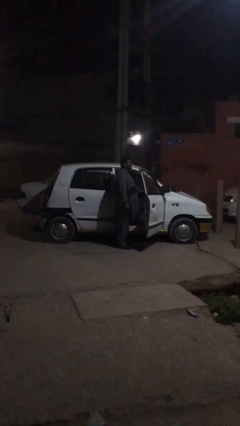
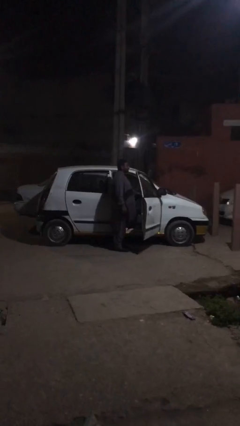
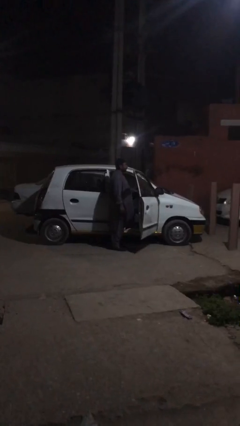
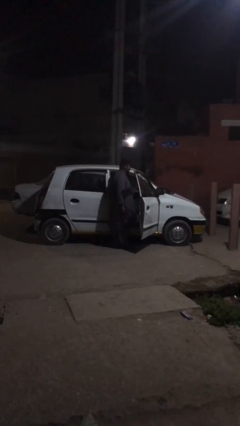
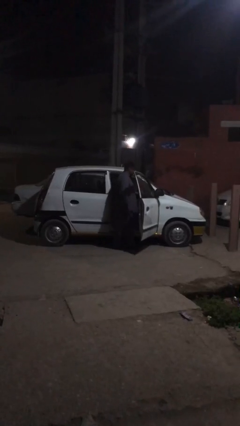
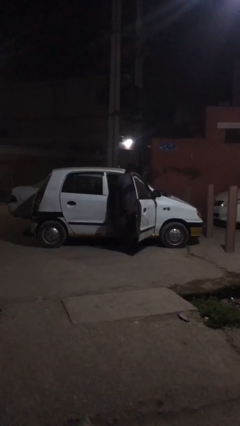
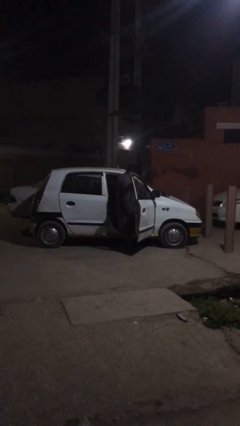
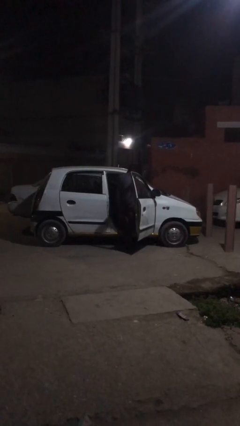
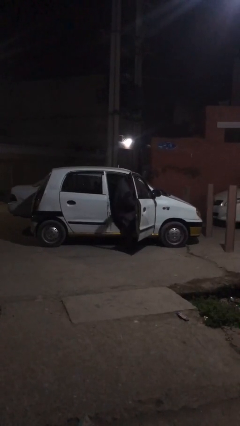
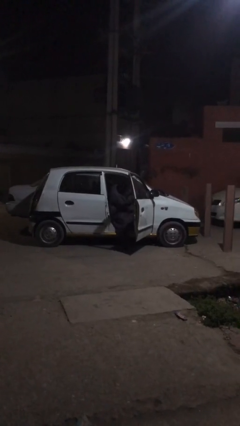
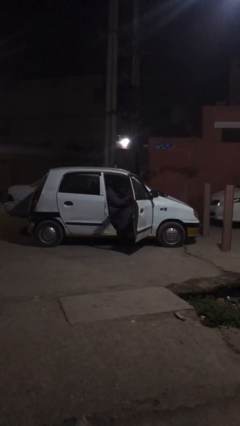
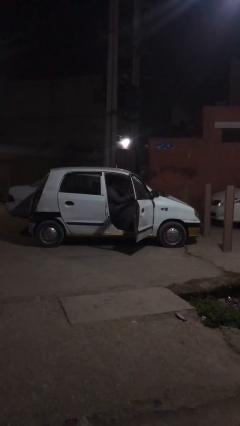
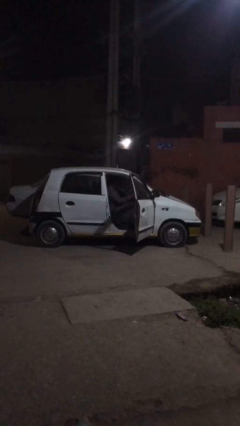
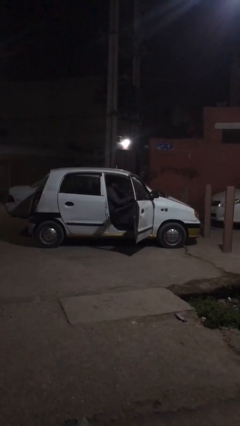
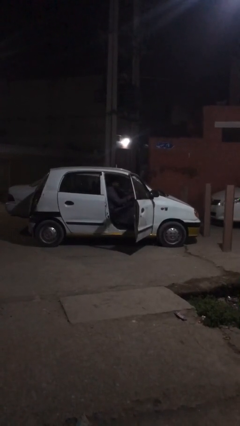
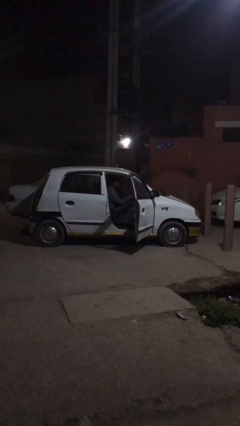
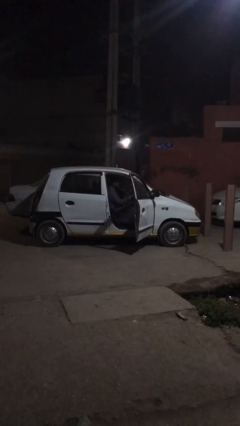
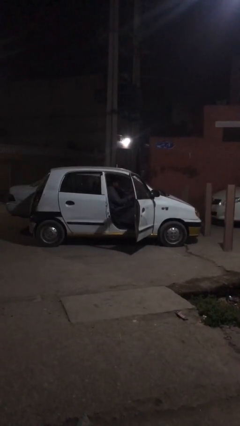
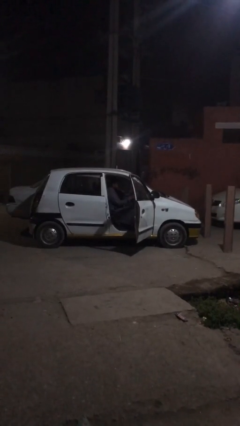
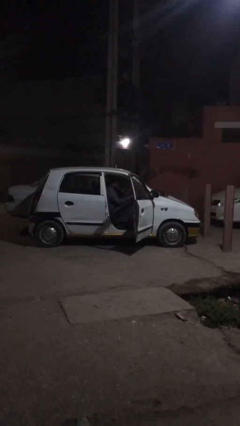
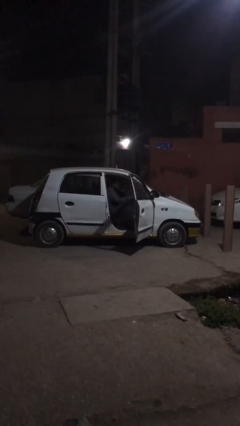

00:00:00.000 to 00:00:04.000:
person enters car

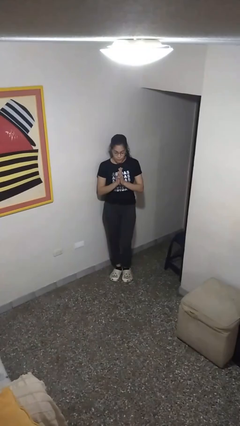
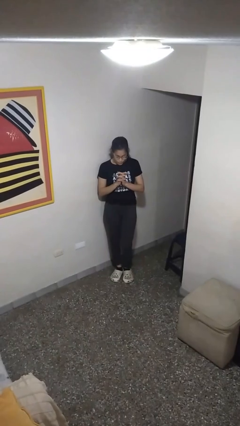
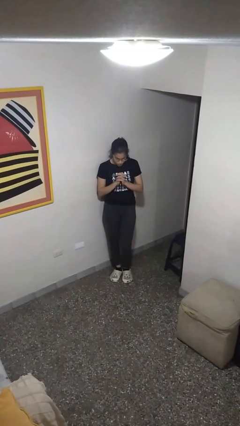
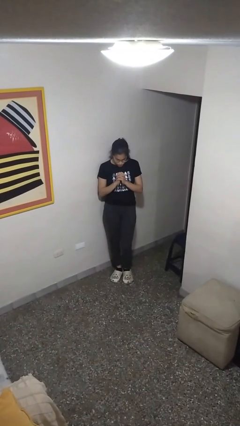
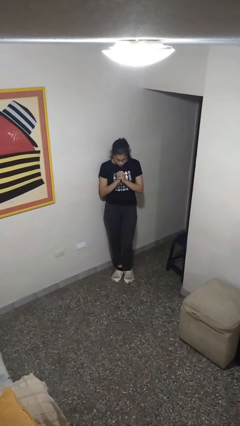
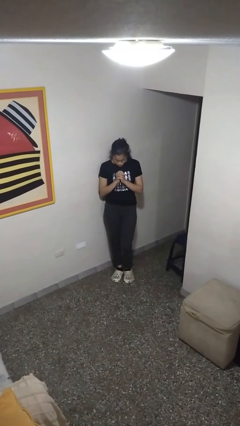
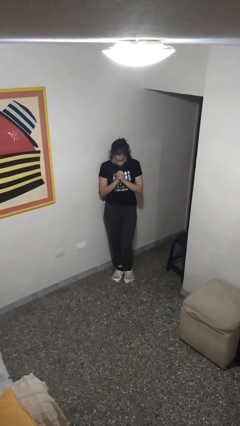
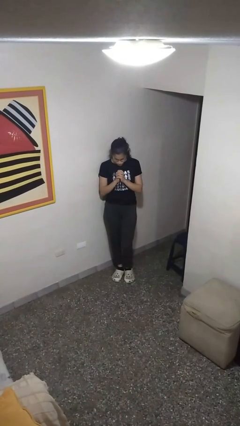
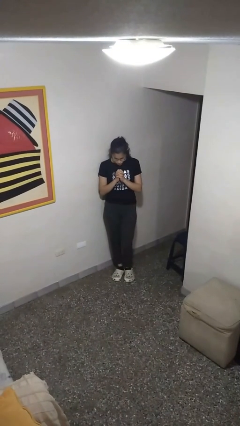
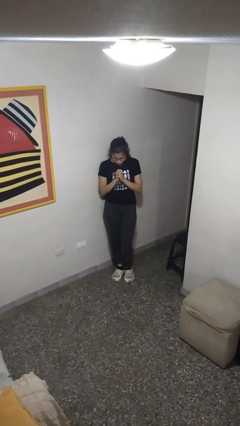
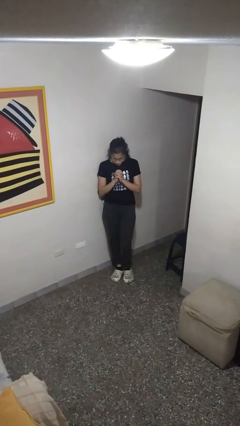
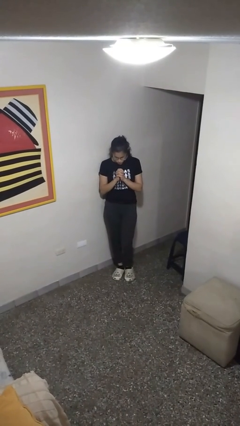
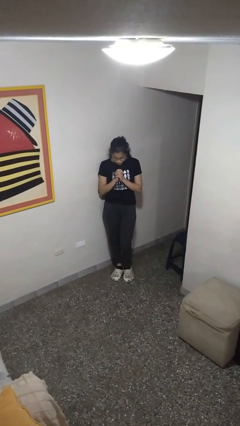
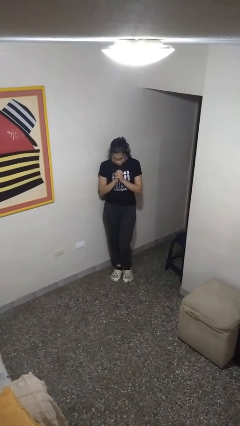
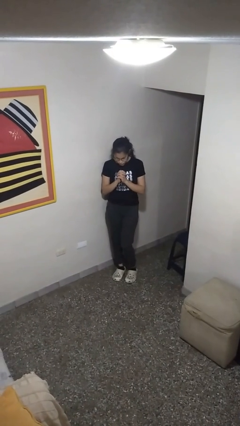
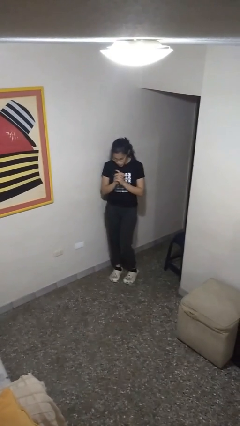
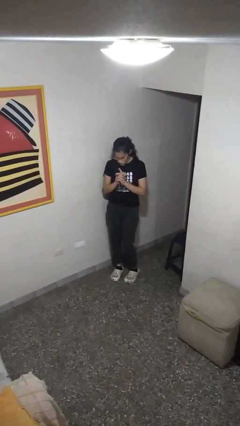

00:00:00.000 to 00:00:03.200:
person prays

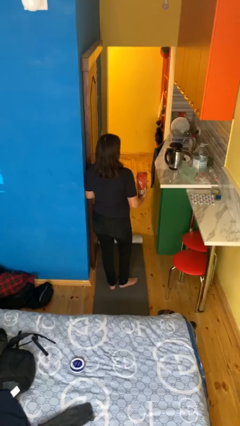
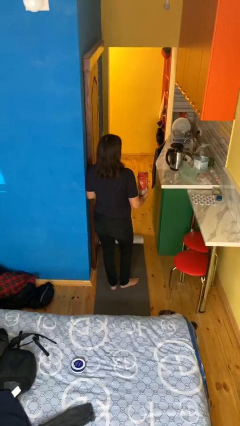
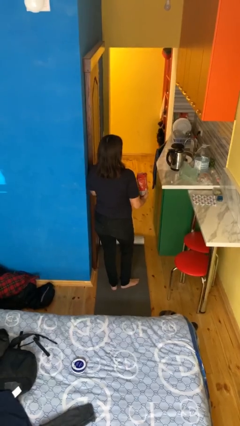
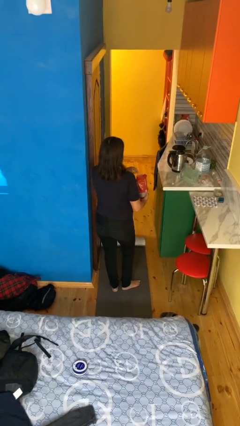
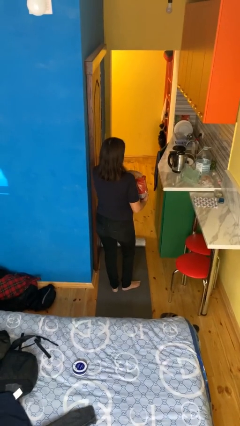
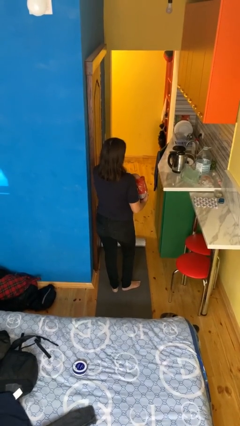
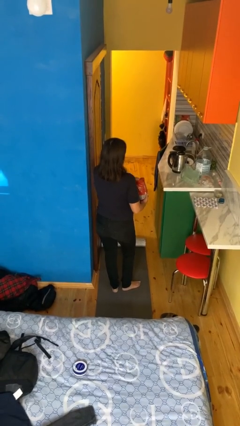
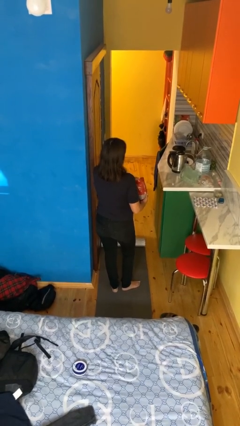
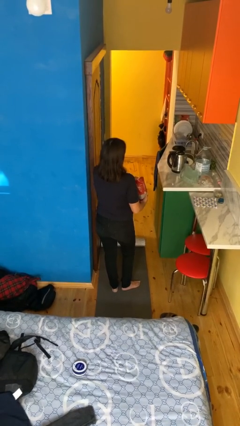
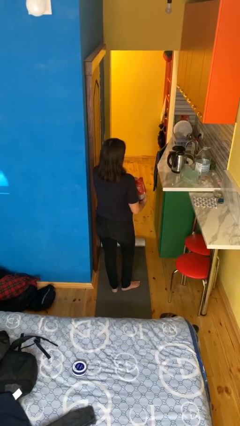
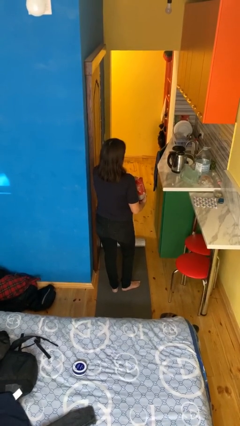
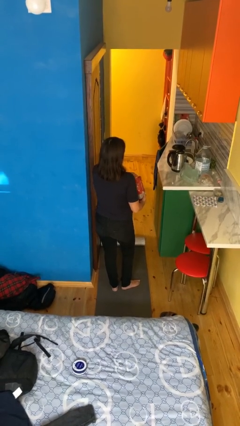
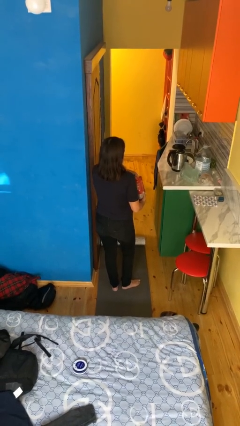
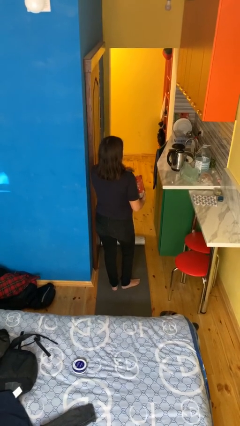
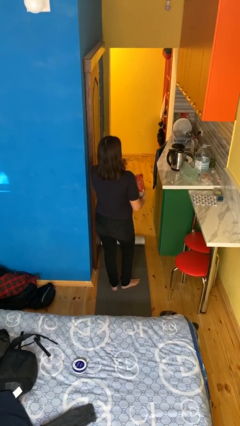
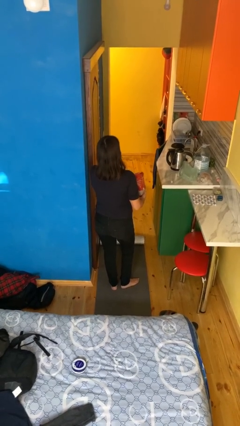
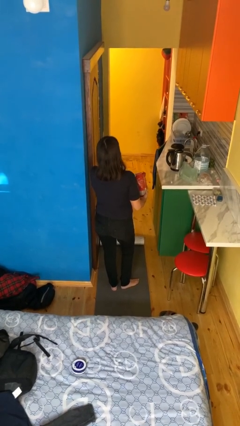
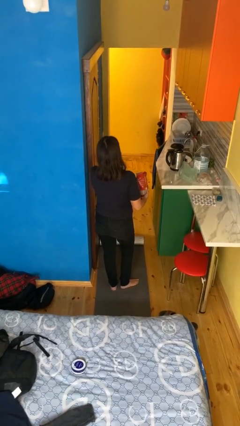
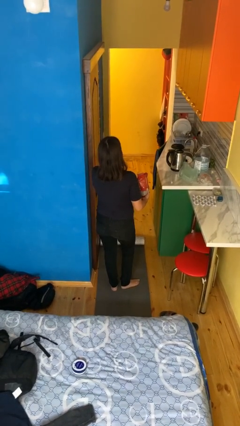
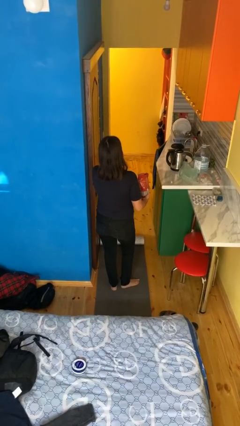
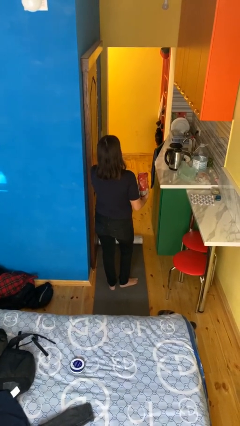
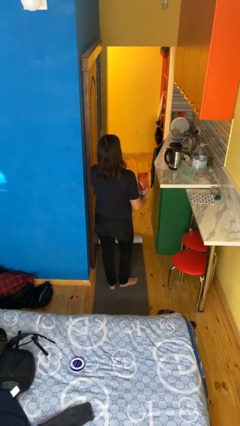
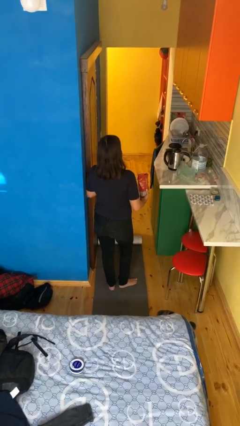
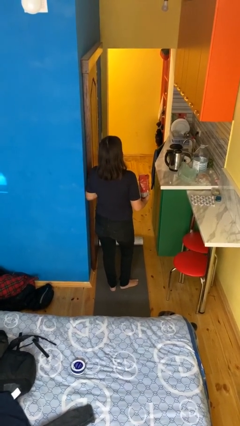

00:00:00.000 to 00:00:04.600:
person eats snack from bag

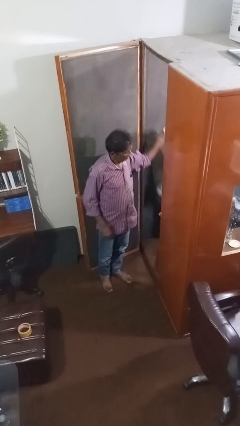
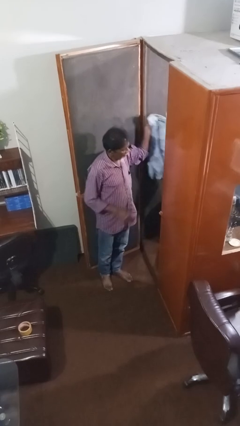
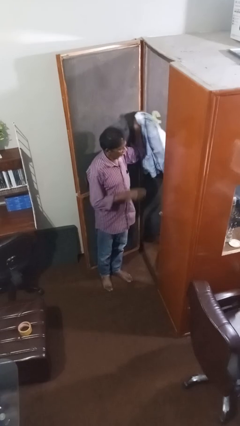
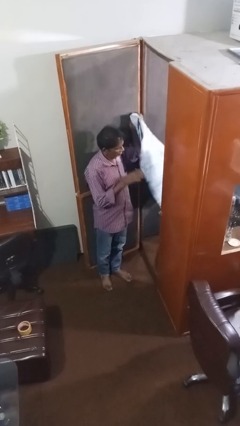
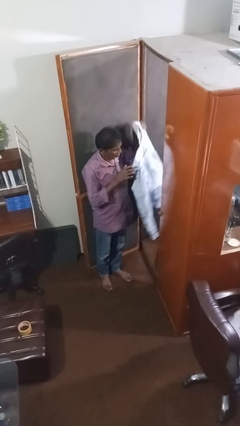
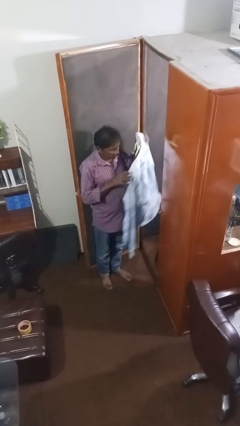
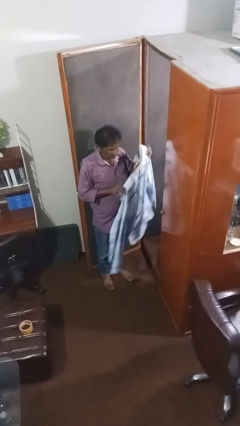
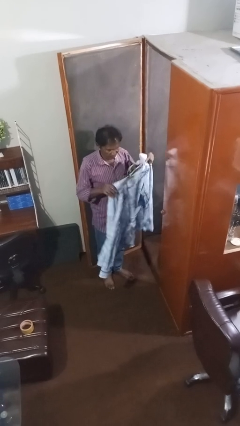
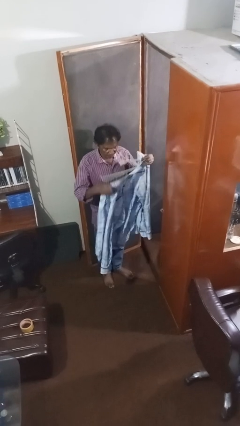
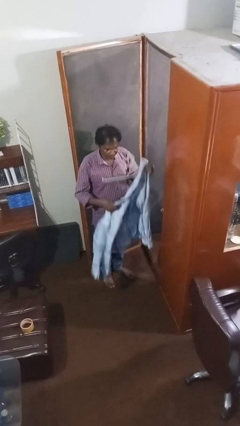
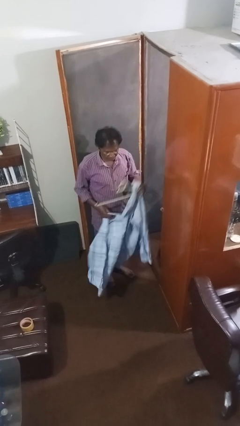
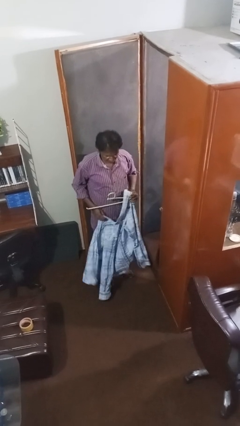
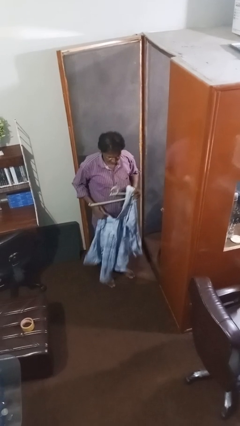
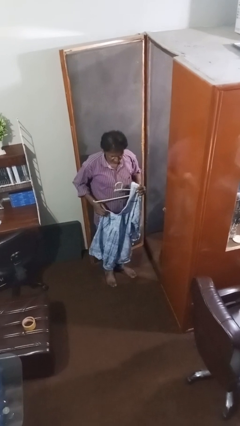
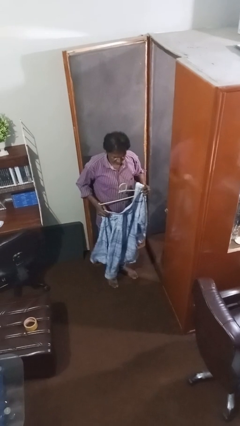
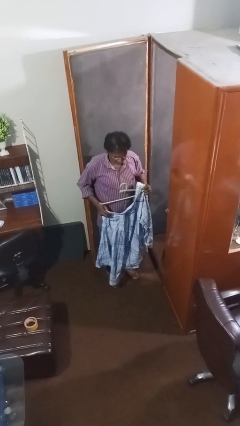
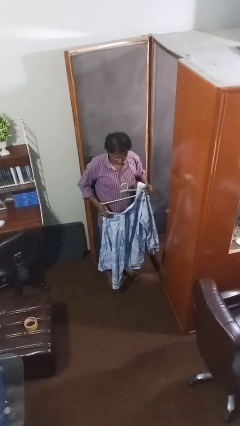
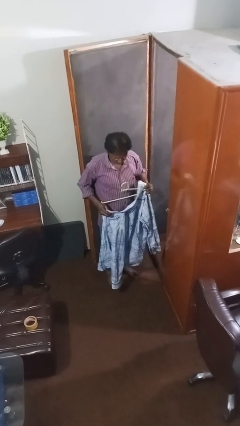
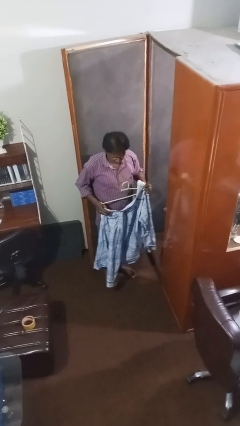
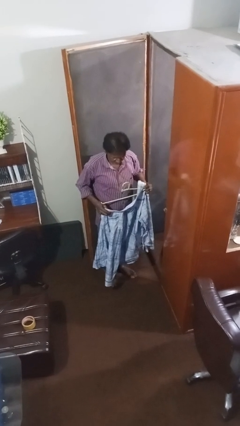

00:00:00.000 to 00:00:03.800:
person takes clothes from closet

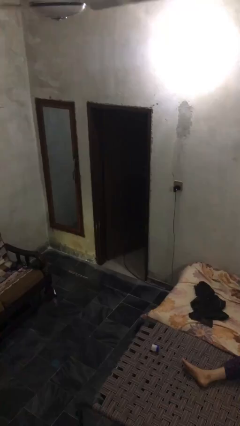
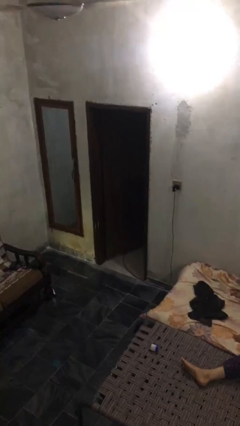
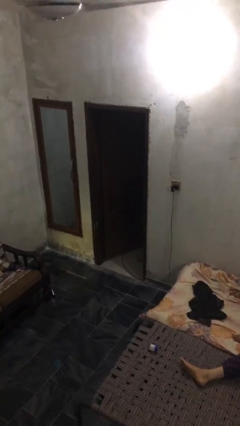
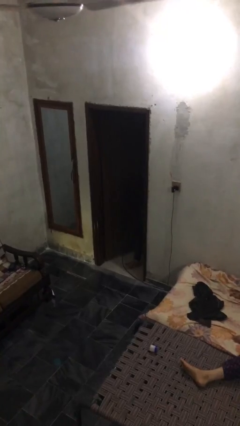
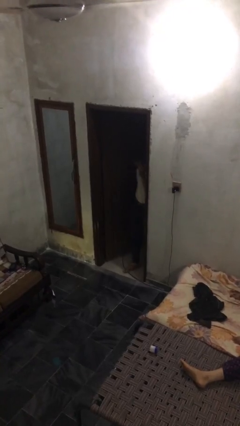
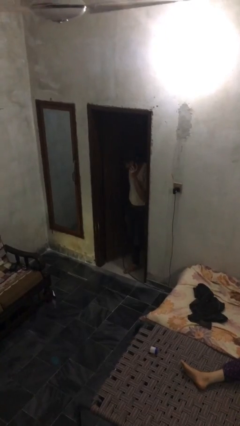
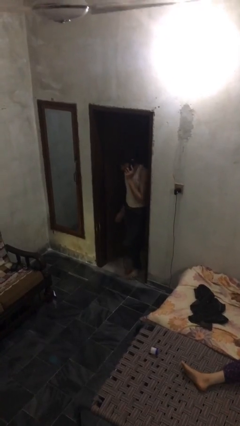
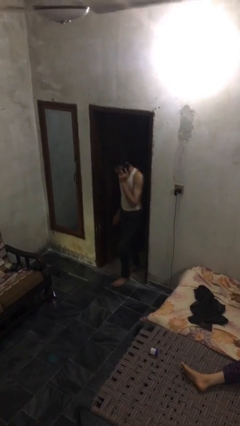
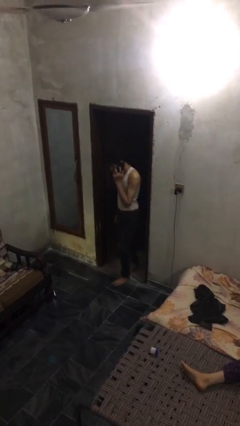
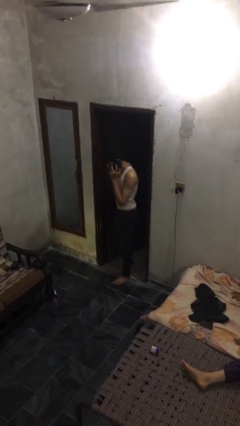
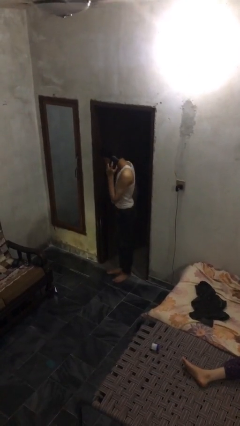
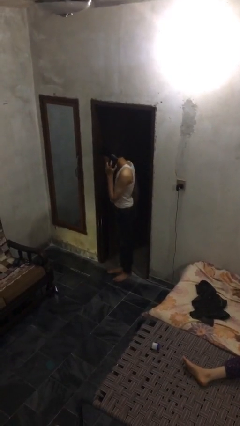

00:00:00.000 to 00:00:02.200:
person enters scene through structure
